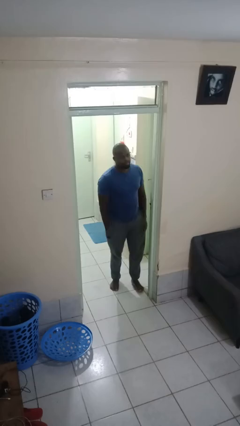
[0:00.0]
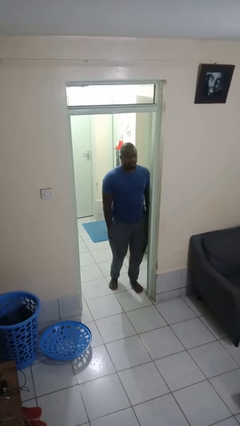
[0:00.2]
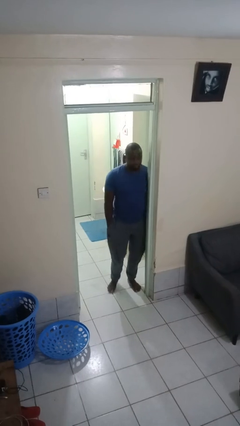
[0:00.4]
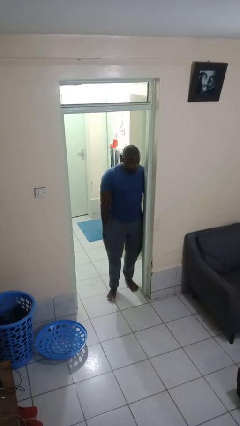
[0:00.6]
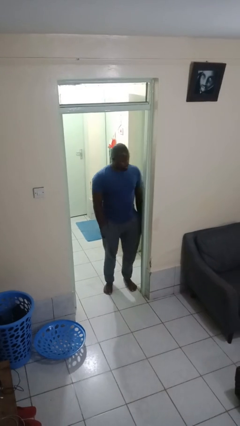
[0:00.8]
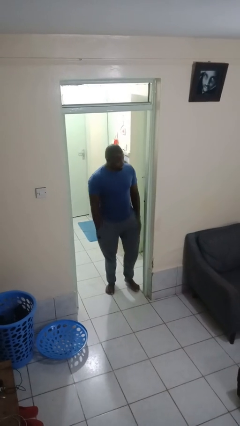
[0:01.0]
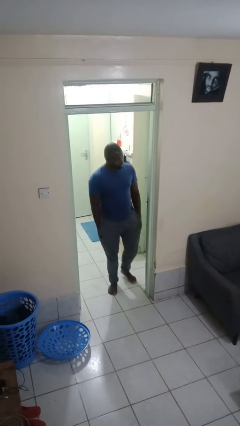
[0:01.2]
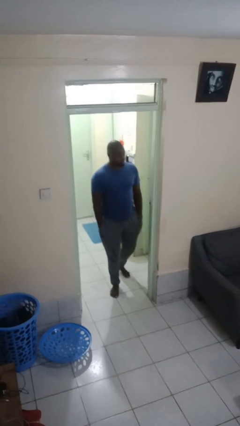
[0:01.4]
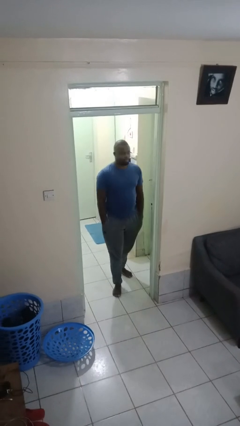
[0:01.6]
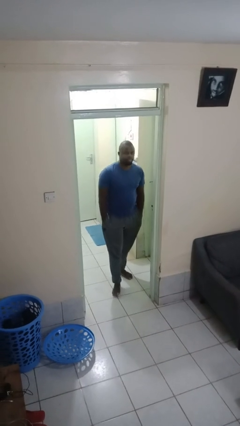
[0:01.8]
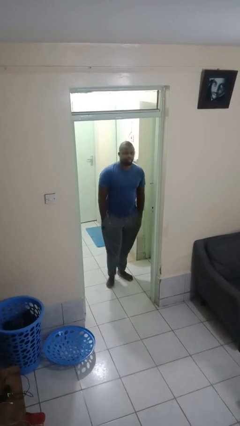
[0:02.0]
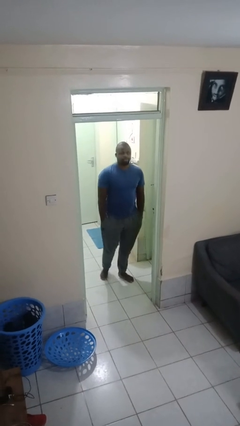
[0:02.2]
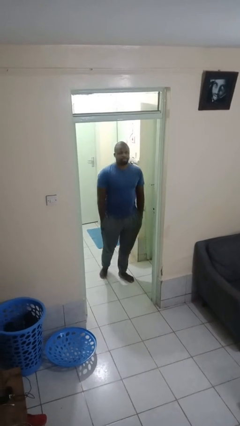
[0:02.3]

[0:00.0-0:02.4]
person bumps into wall

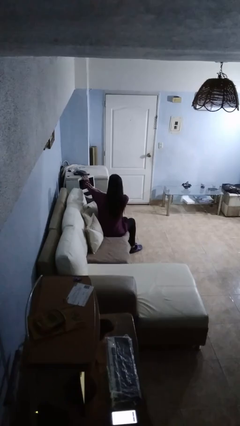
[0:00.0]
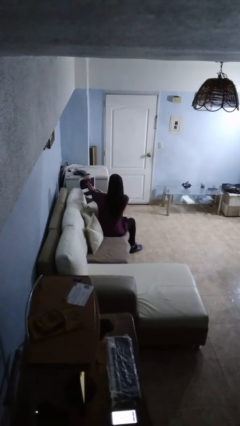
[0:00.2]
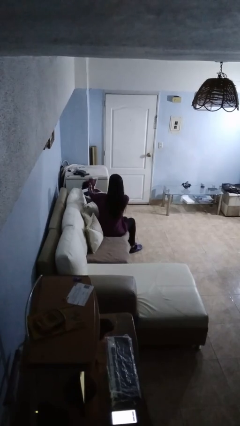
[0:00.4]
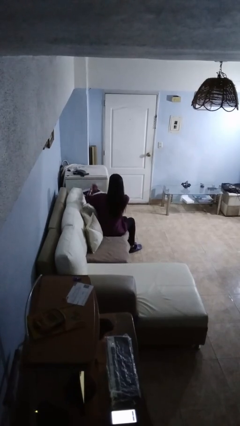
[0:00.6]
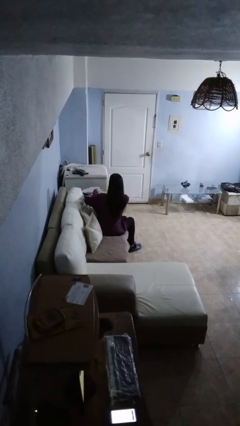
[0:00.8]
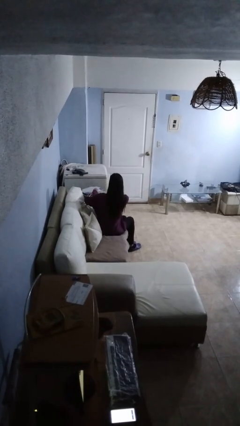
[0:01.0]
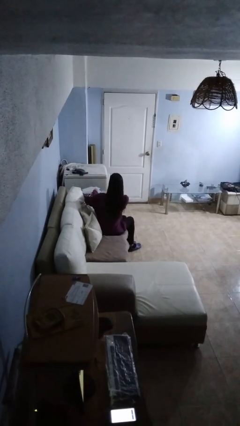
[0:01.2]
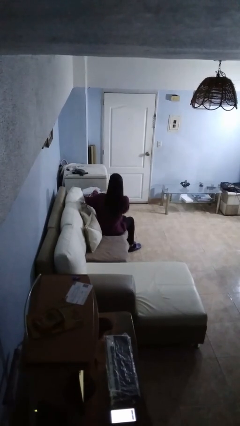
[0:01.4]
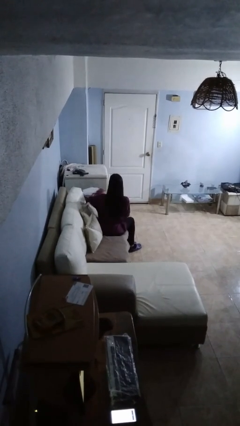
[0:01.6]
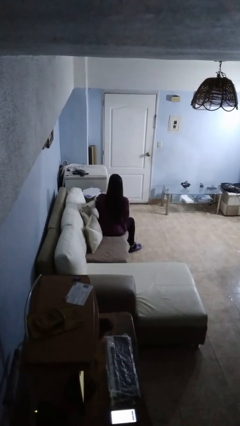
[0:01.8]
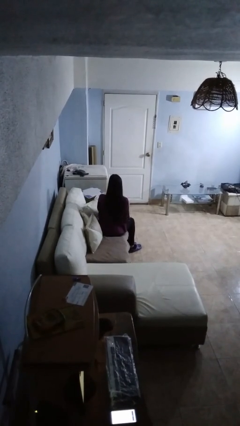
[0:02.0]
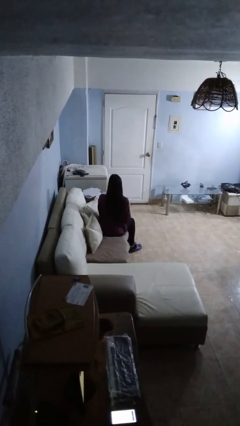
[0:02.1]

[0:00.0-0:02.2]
person closes laptop

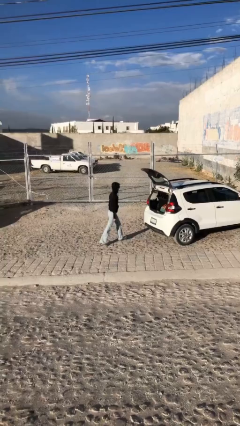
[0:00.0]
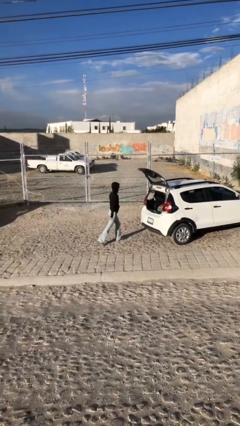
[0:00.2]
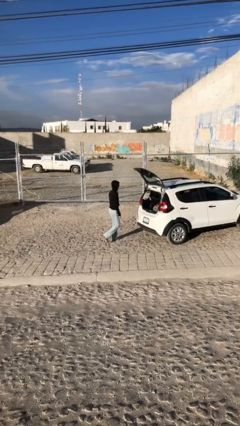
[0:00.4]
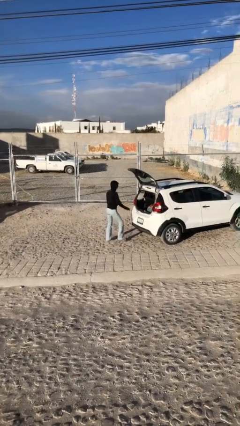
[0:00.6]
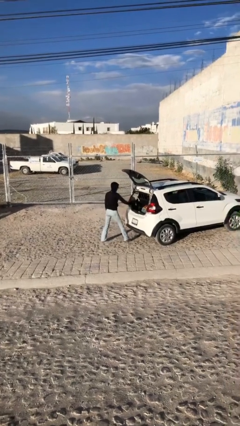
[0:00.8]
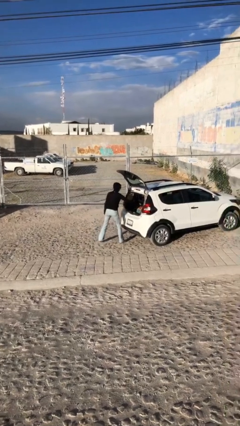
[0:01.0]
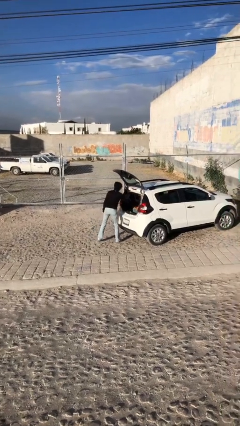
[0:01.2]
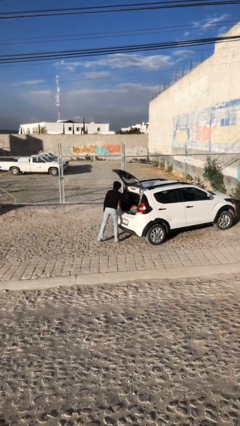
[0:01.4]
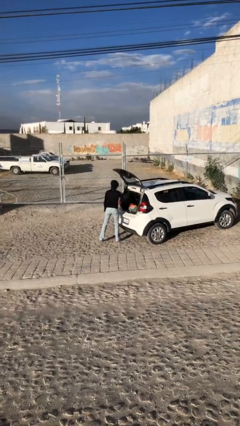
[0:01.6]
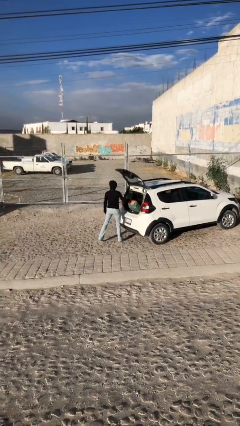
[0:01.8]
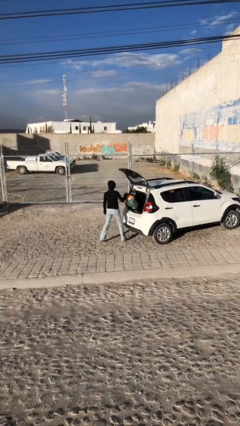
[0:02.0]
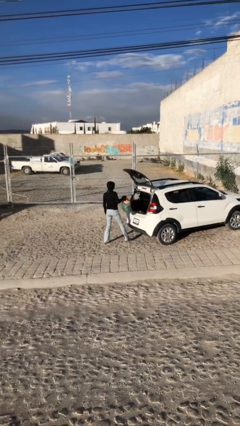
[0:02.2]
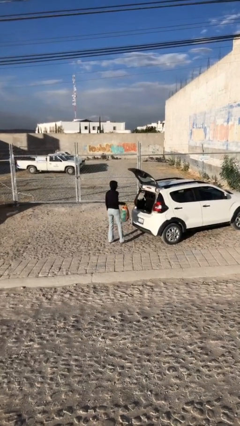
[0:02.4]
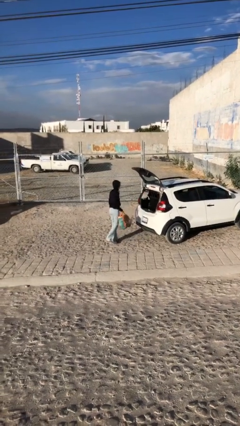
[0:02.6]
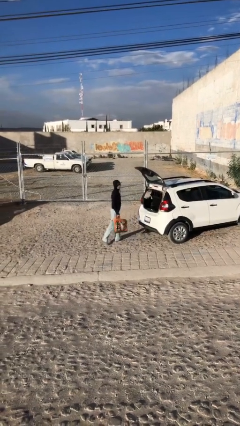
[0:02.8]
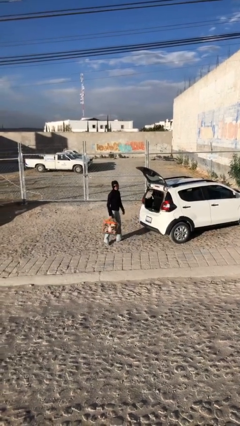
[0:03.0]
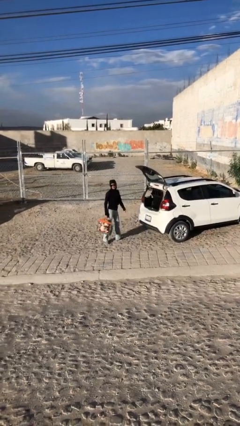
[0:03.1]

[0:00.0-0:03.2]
person unloads car

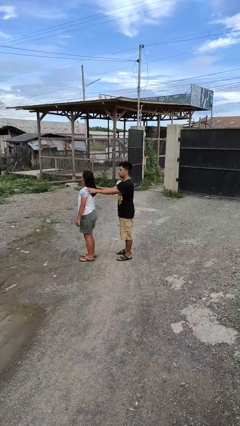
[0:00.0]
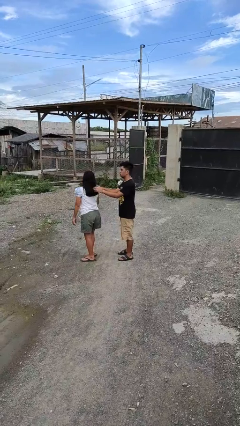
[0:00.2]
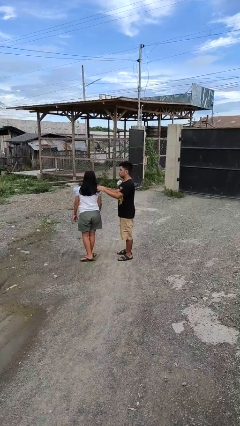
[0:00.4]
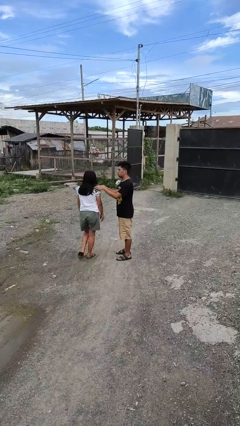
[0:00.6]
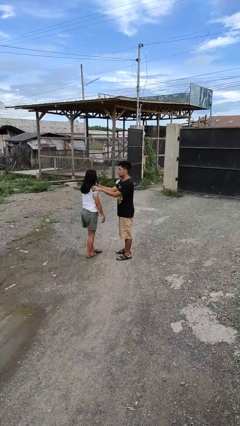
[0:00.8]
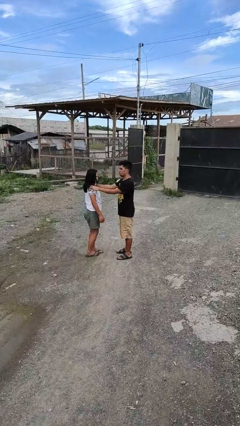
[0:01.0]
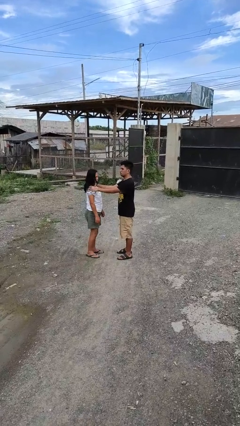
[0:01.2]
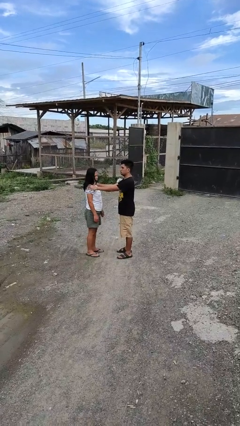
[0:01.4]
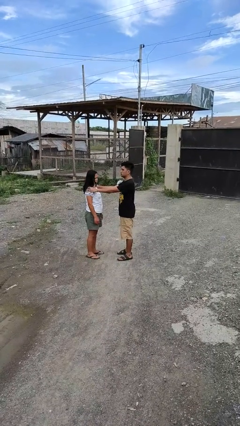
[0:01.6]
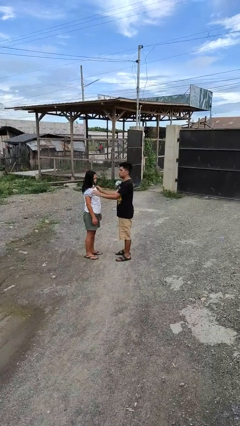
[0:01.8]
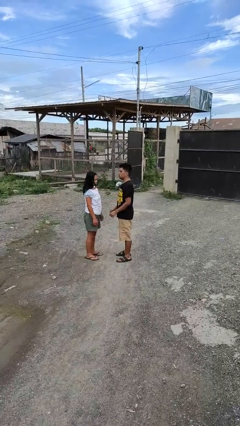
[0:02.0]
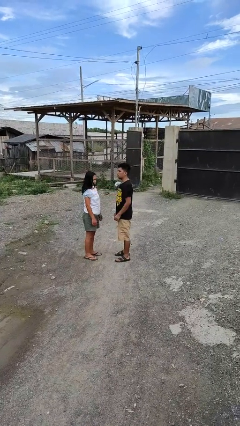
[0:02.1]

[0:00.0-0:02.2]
person spins person around

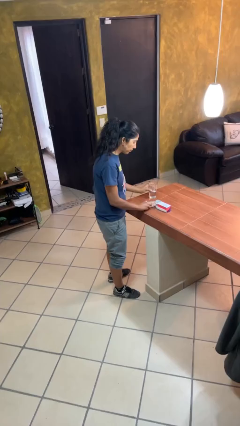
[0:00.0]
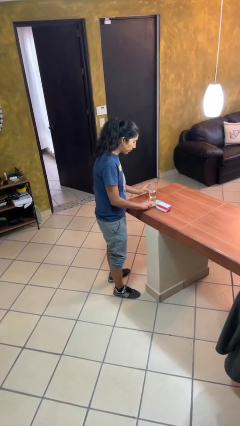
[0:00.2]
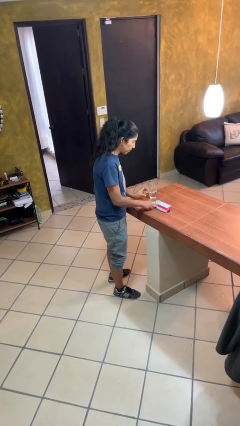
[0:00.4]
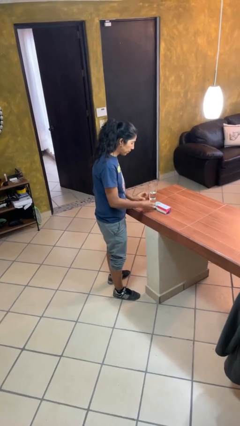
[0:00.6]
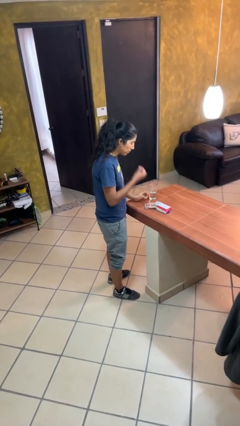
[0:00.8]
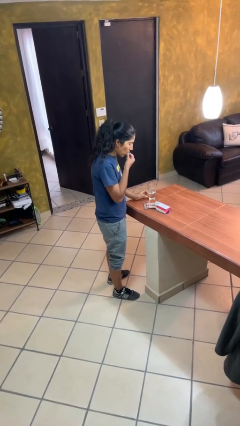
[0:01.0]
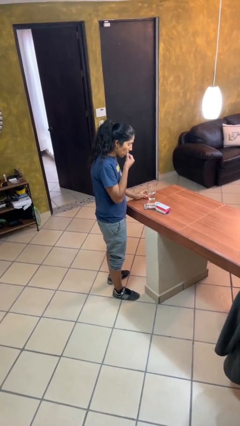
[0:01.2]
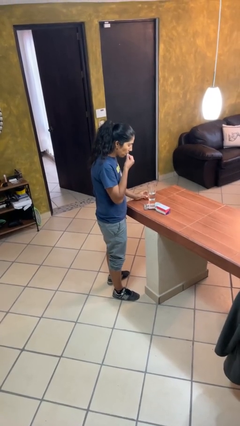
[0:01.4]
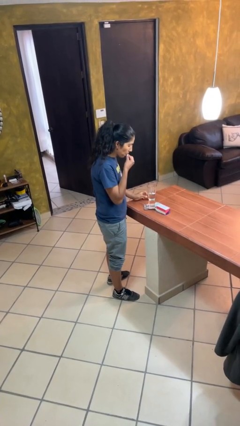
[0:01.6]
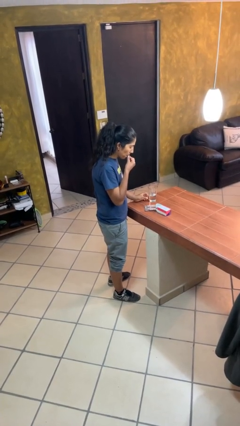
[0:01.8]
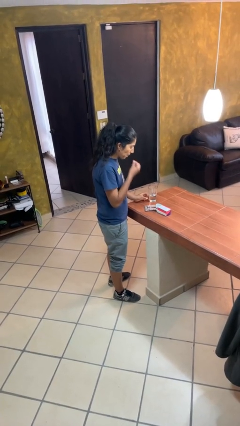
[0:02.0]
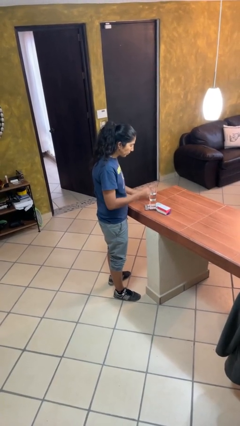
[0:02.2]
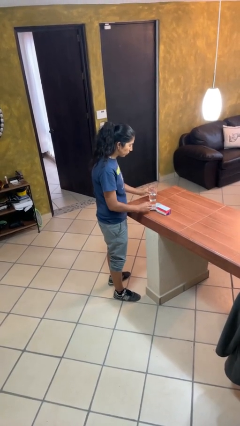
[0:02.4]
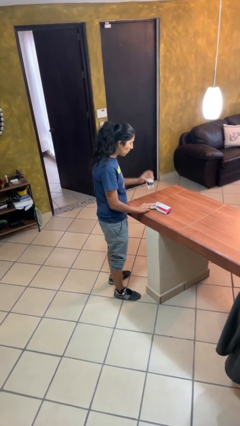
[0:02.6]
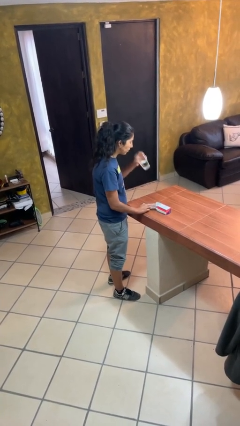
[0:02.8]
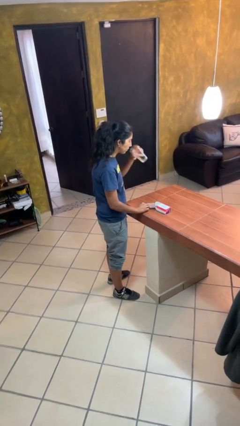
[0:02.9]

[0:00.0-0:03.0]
person takes medicine pills

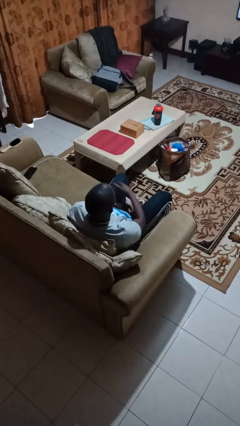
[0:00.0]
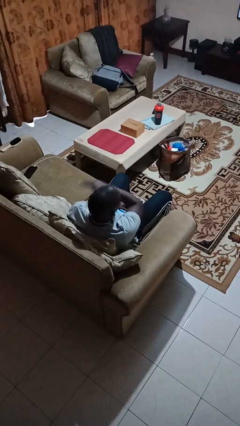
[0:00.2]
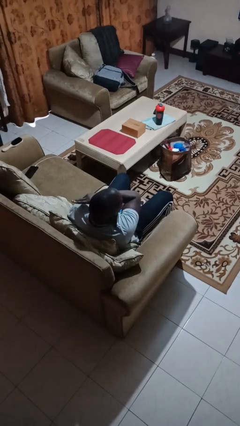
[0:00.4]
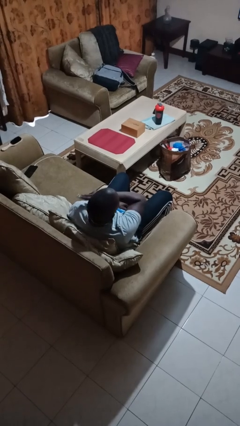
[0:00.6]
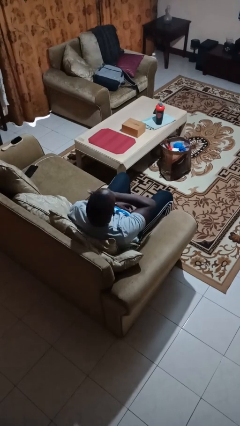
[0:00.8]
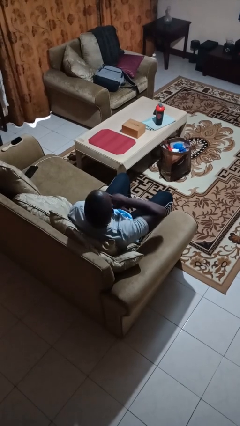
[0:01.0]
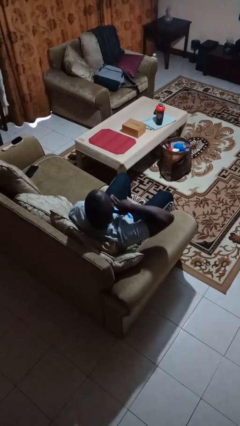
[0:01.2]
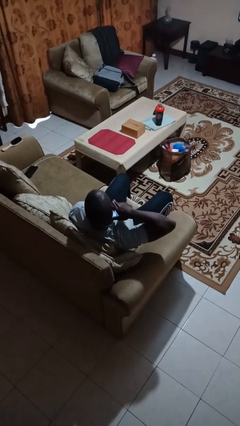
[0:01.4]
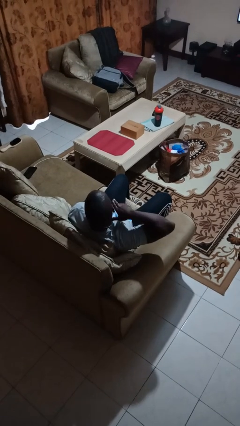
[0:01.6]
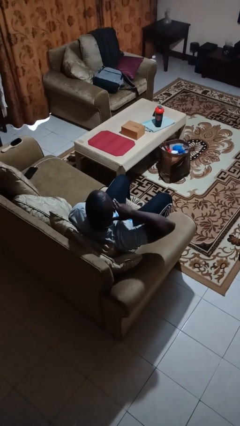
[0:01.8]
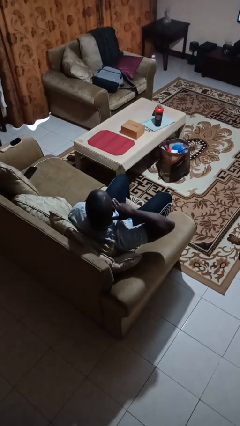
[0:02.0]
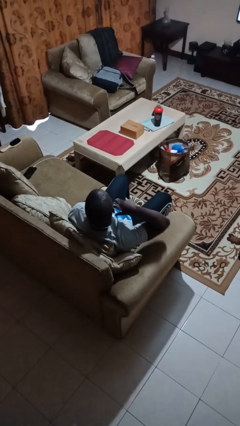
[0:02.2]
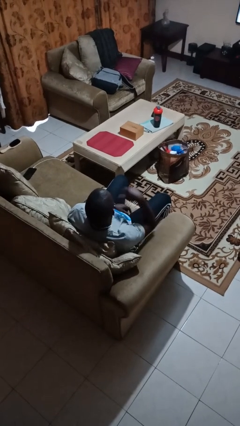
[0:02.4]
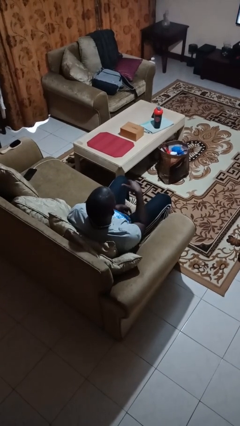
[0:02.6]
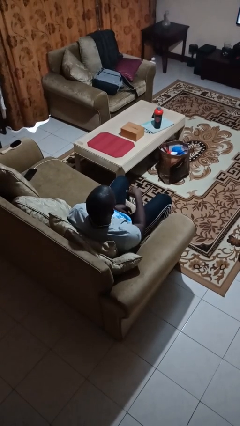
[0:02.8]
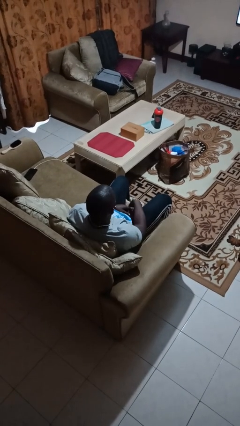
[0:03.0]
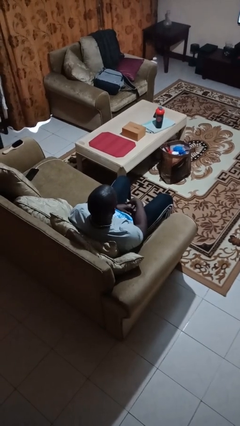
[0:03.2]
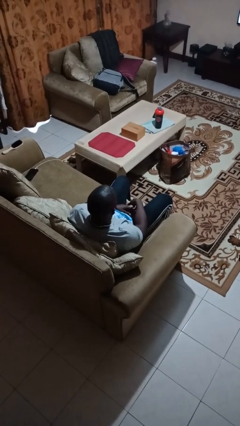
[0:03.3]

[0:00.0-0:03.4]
person gestures cut

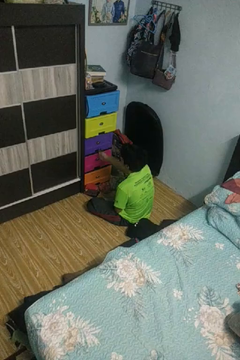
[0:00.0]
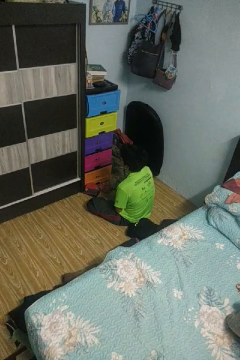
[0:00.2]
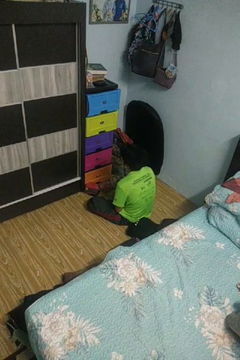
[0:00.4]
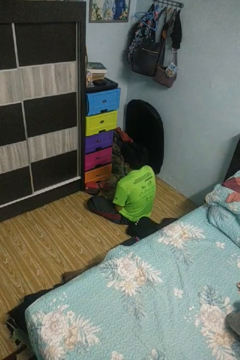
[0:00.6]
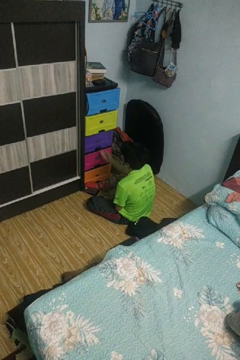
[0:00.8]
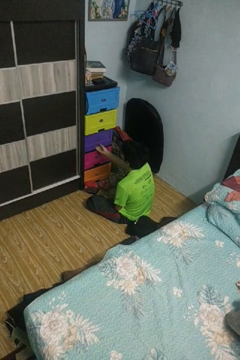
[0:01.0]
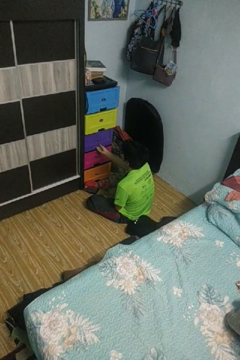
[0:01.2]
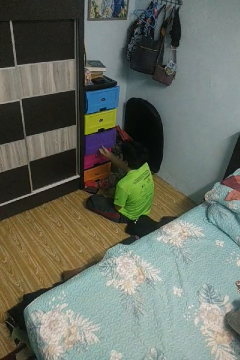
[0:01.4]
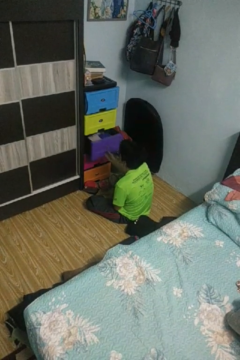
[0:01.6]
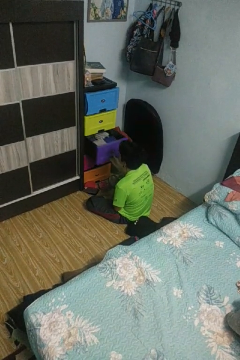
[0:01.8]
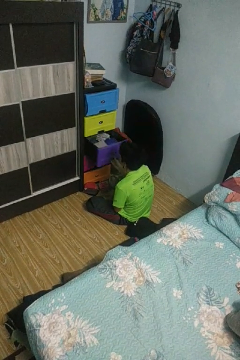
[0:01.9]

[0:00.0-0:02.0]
person opens dresser drawer
